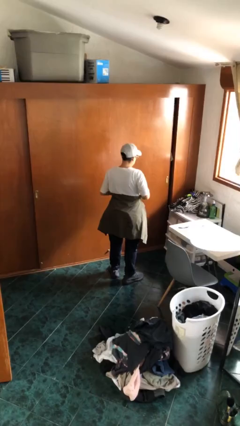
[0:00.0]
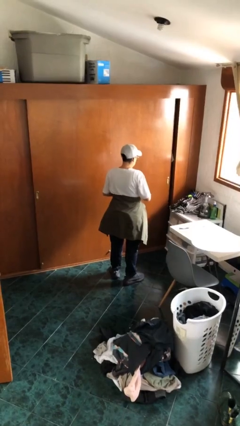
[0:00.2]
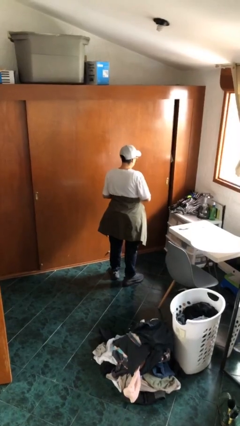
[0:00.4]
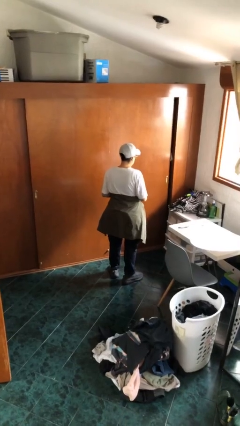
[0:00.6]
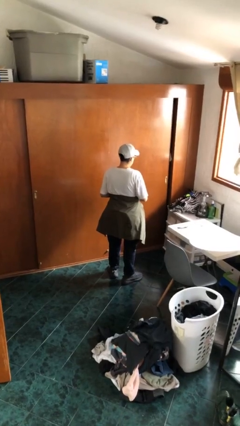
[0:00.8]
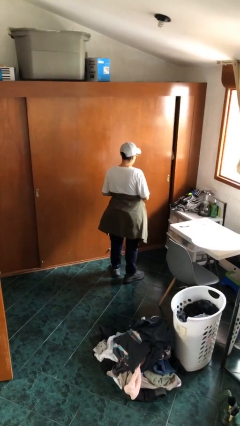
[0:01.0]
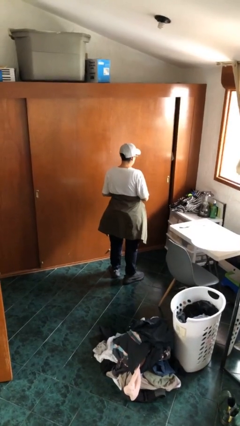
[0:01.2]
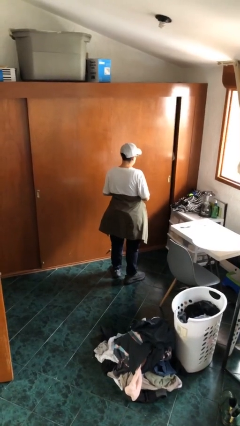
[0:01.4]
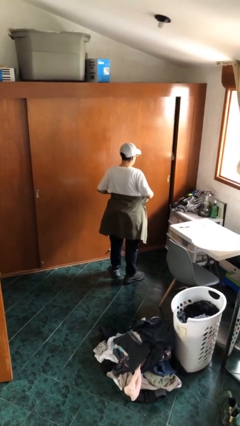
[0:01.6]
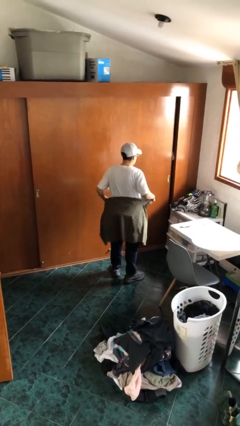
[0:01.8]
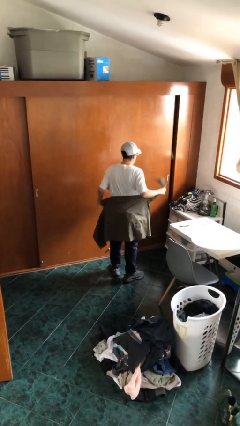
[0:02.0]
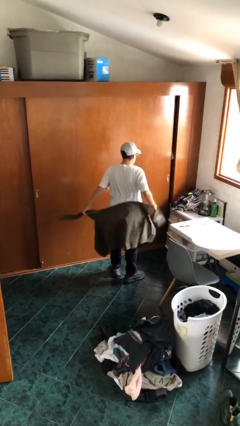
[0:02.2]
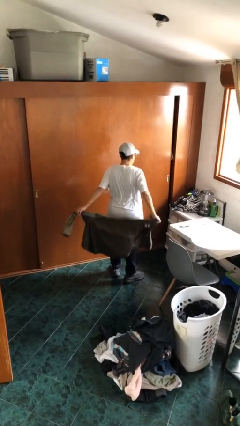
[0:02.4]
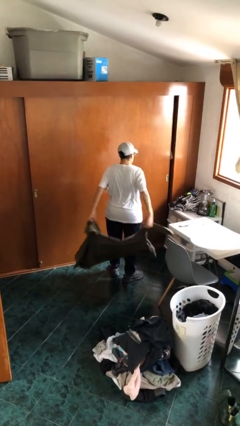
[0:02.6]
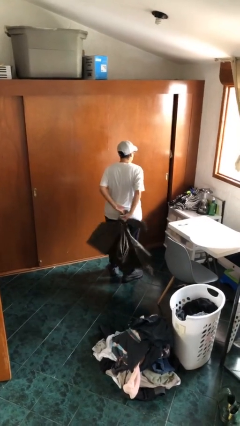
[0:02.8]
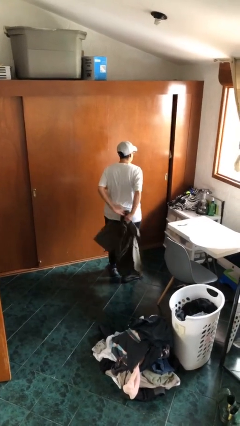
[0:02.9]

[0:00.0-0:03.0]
person unties jacket around waist

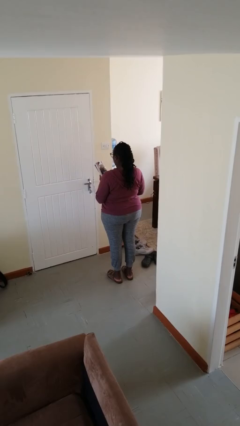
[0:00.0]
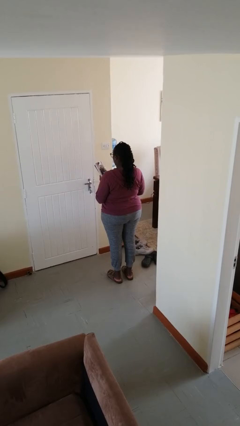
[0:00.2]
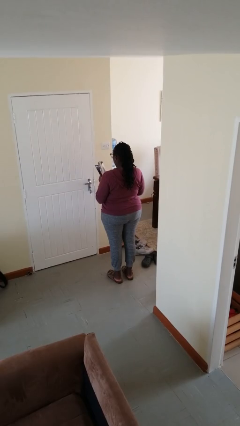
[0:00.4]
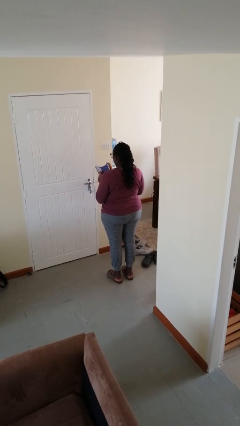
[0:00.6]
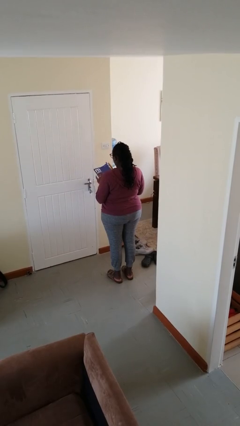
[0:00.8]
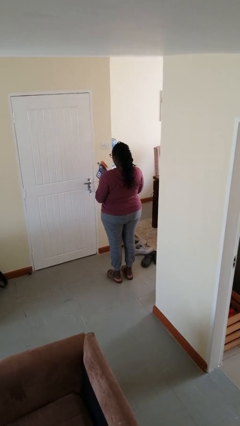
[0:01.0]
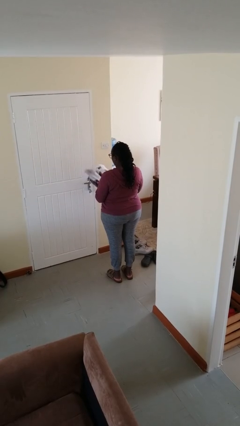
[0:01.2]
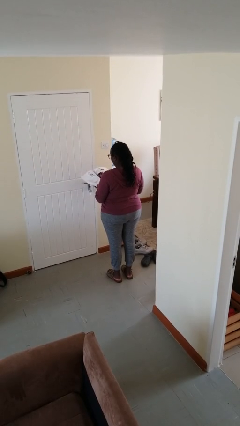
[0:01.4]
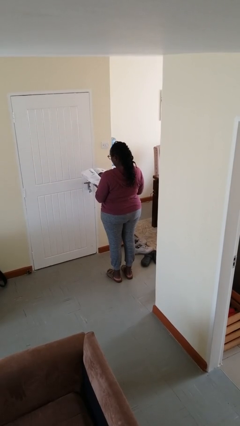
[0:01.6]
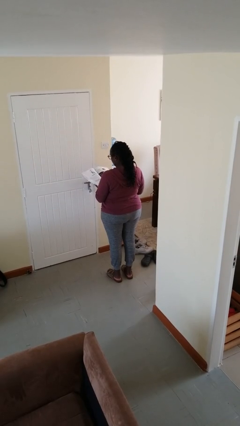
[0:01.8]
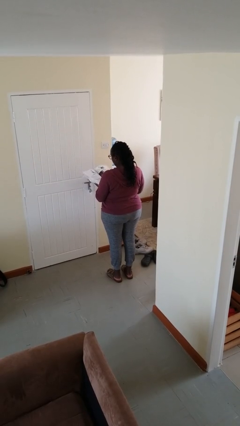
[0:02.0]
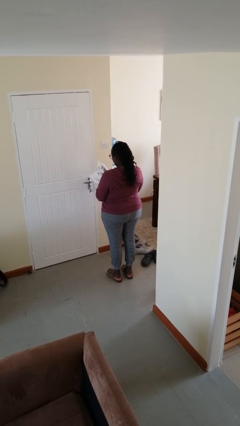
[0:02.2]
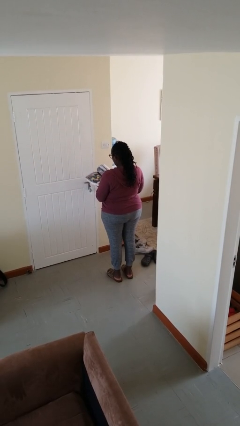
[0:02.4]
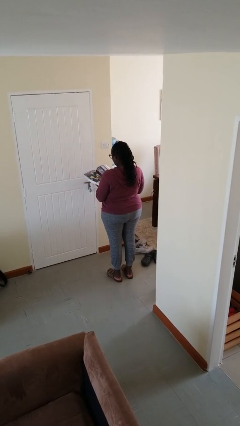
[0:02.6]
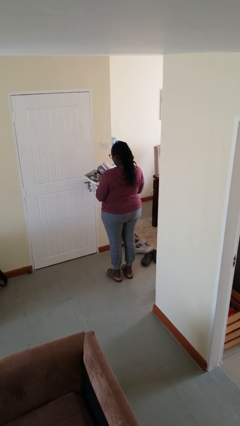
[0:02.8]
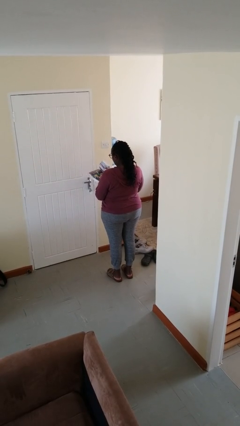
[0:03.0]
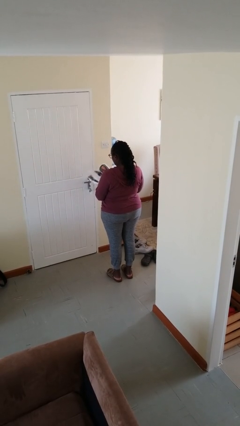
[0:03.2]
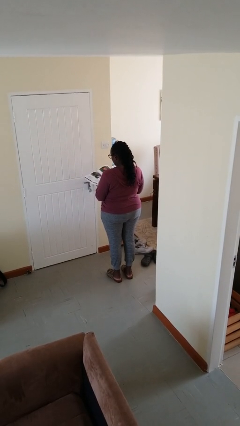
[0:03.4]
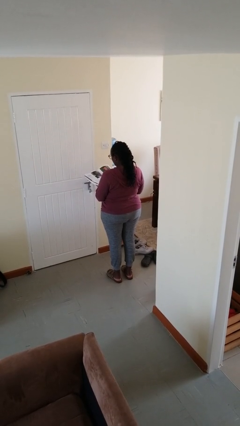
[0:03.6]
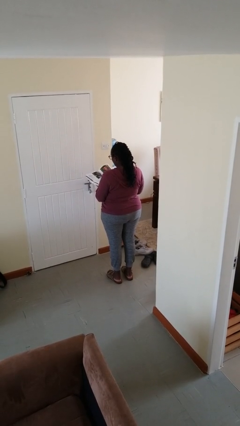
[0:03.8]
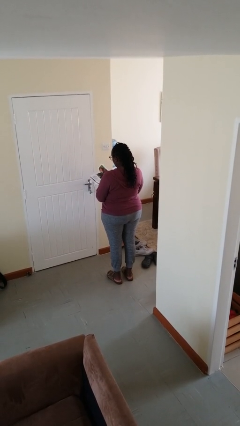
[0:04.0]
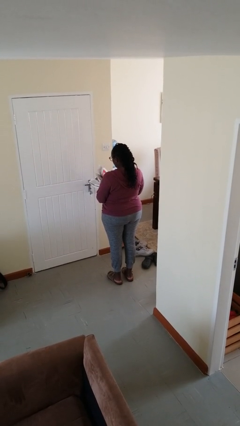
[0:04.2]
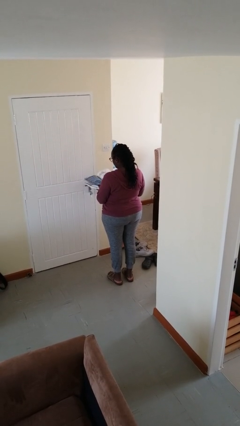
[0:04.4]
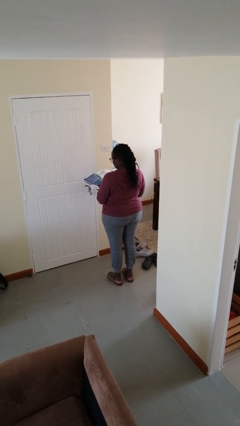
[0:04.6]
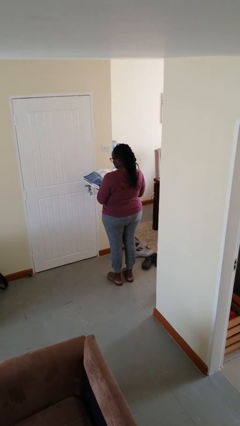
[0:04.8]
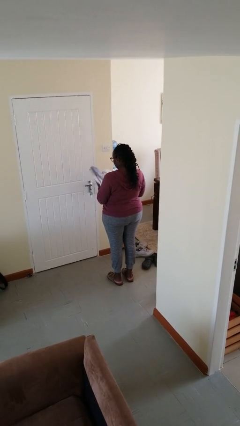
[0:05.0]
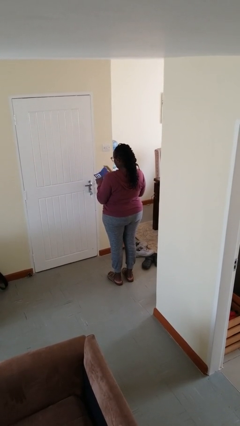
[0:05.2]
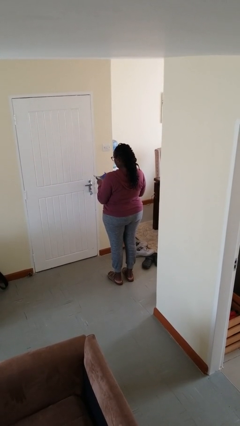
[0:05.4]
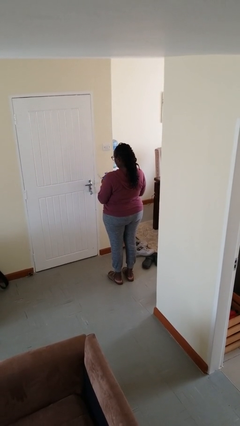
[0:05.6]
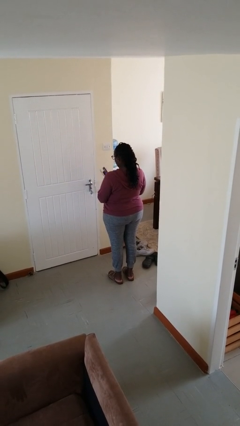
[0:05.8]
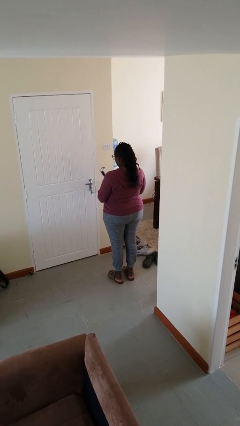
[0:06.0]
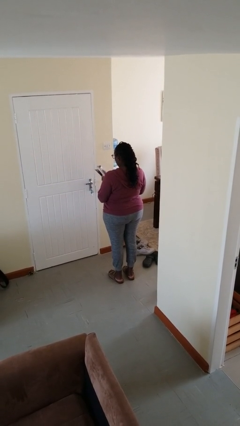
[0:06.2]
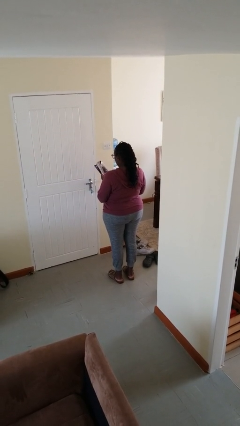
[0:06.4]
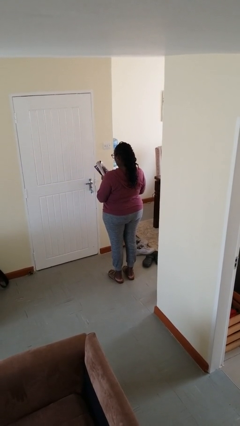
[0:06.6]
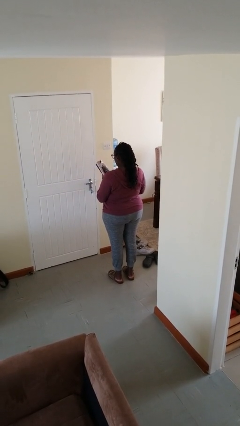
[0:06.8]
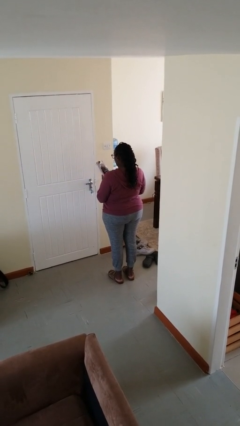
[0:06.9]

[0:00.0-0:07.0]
person reads magazine

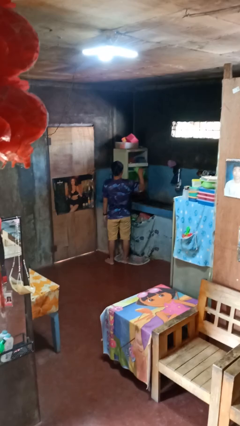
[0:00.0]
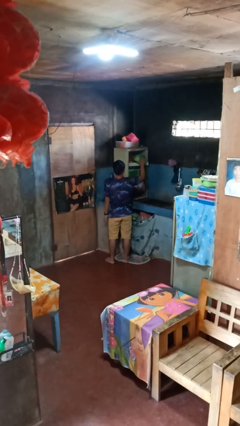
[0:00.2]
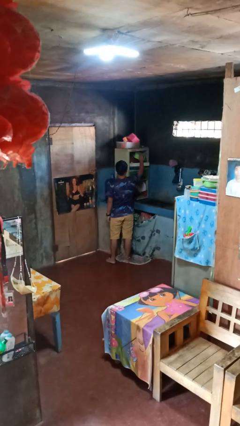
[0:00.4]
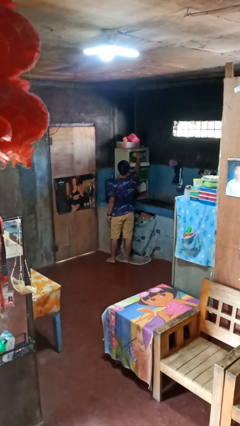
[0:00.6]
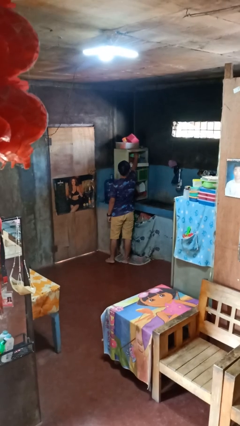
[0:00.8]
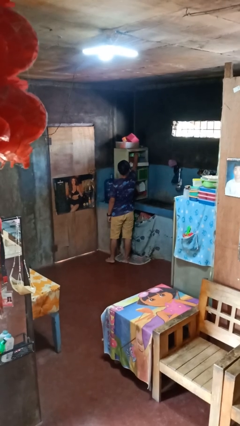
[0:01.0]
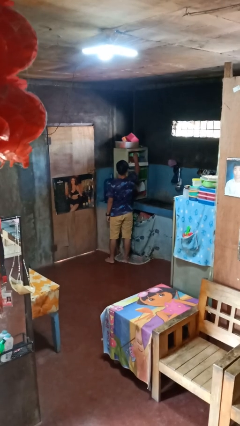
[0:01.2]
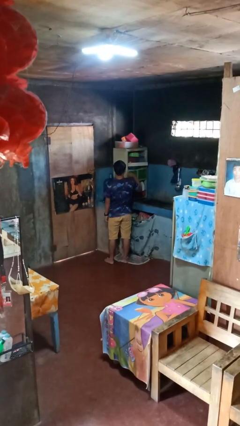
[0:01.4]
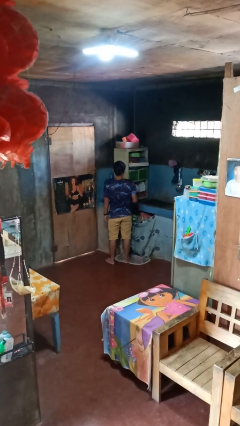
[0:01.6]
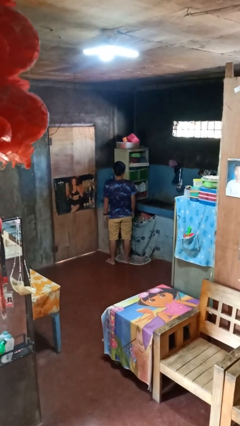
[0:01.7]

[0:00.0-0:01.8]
person puts object in cabinet

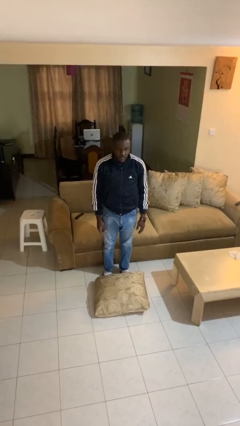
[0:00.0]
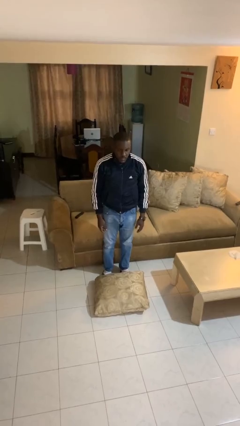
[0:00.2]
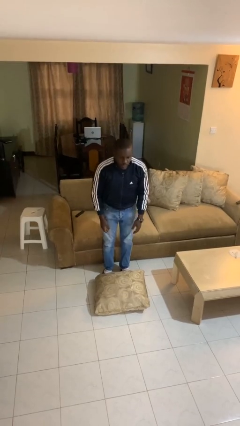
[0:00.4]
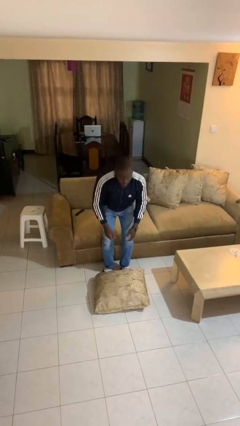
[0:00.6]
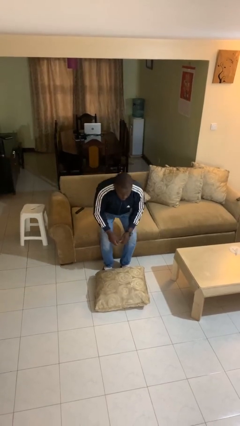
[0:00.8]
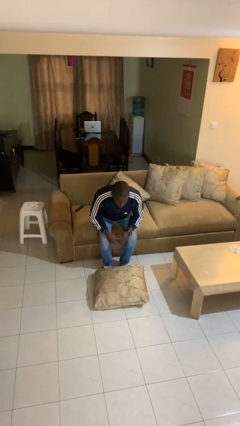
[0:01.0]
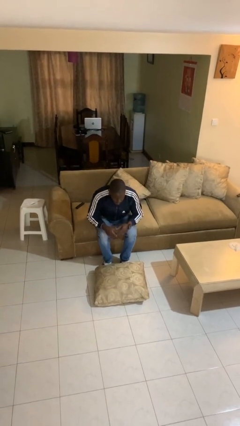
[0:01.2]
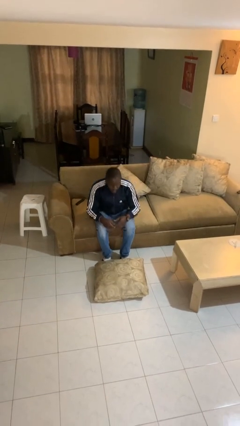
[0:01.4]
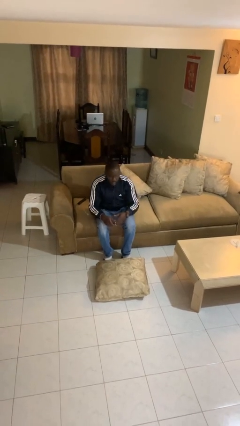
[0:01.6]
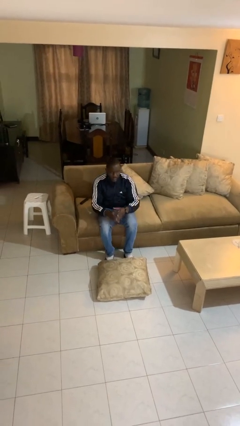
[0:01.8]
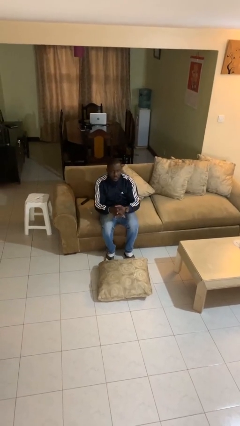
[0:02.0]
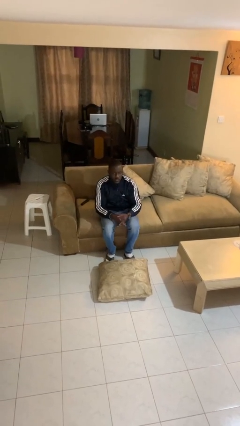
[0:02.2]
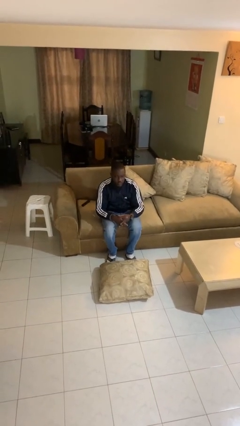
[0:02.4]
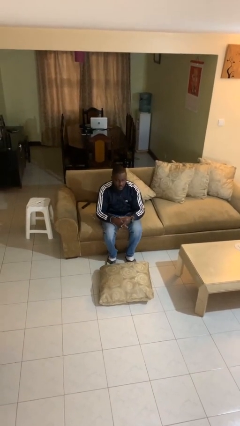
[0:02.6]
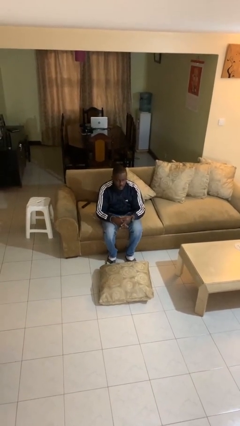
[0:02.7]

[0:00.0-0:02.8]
person sits down

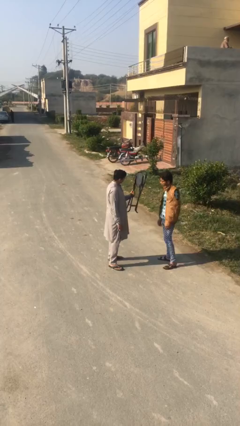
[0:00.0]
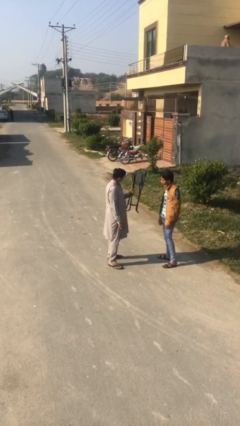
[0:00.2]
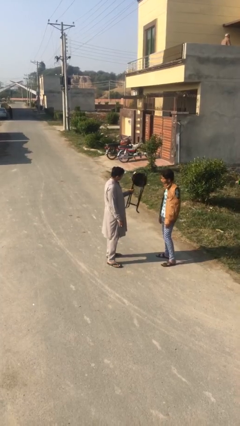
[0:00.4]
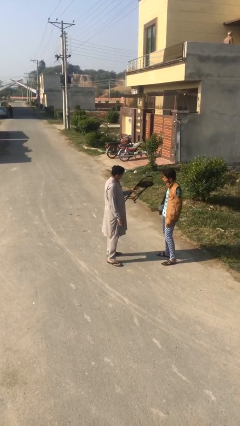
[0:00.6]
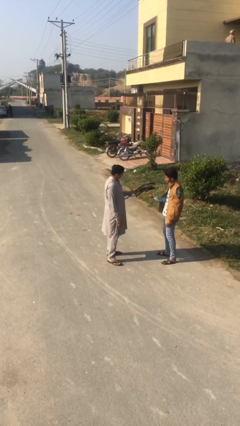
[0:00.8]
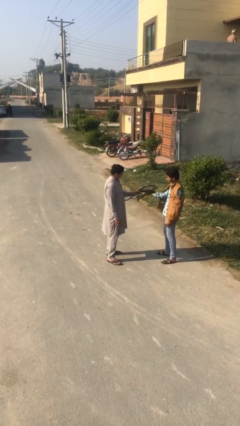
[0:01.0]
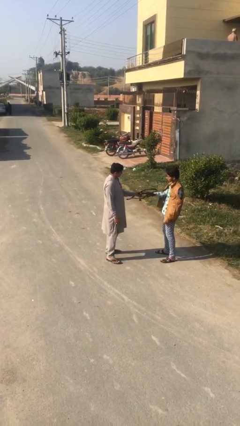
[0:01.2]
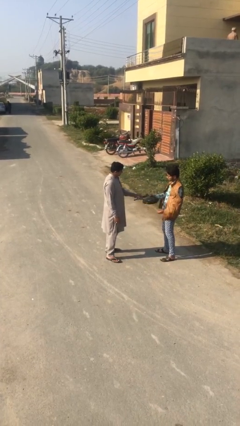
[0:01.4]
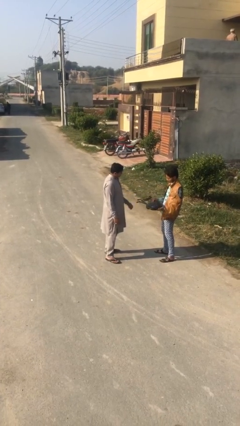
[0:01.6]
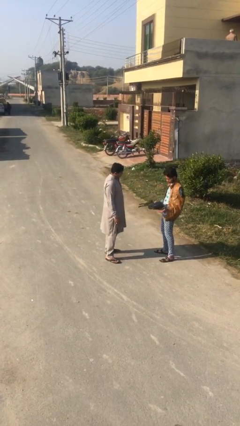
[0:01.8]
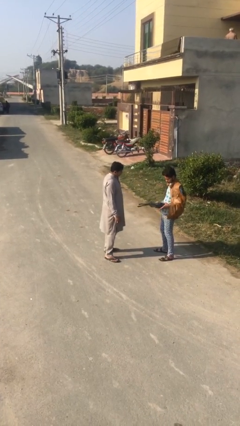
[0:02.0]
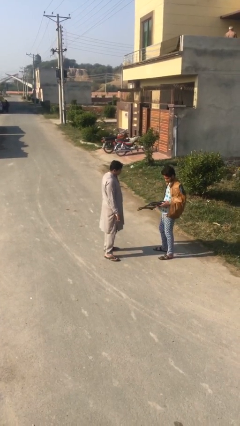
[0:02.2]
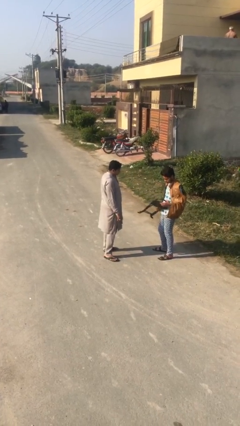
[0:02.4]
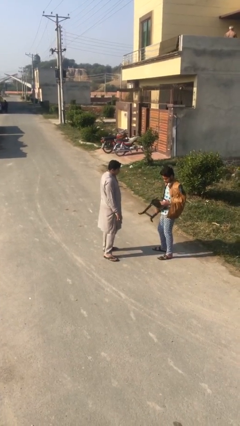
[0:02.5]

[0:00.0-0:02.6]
person transfers object to person

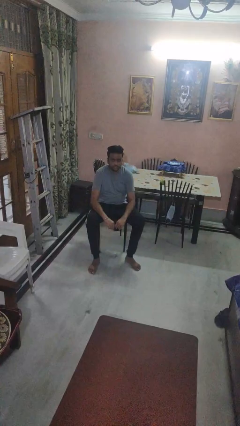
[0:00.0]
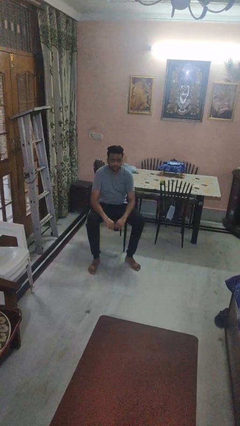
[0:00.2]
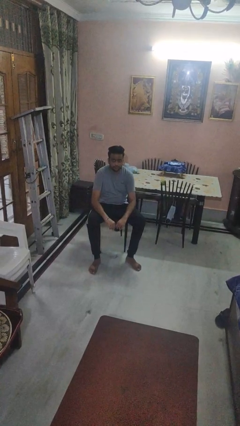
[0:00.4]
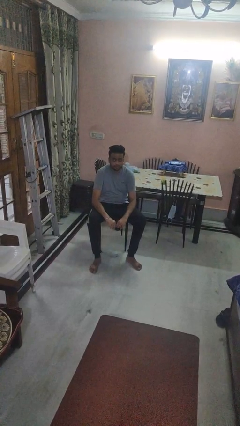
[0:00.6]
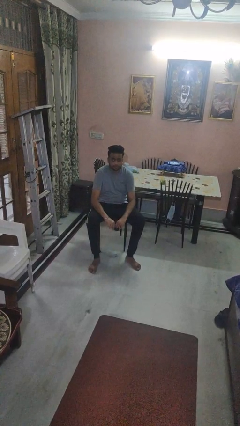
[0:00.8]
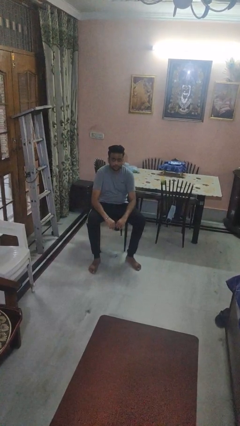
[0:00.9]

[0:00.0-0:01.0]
person stands up from floor
